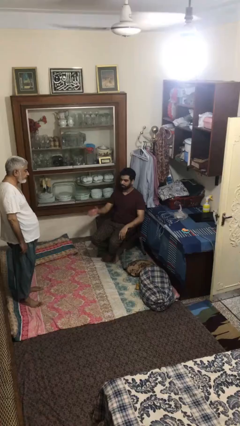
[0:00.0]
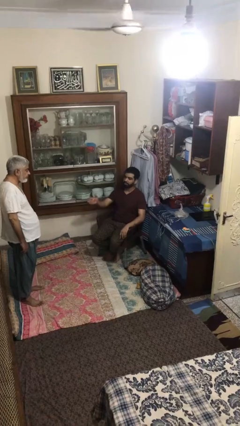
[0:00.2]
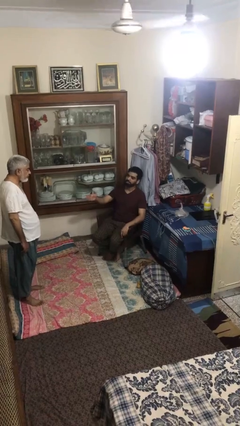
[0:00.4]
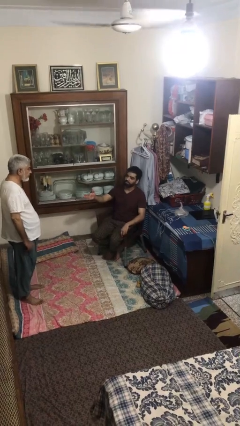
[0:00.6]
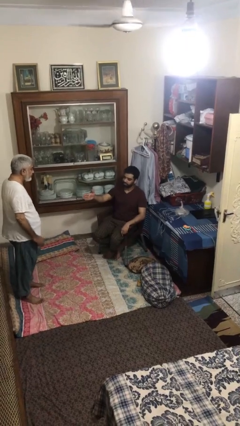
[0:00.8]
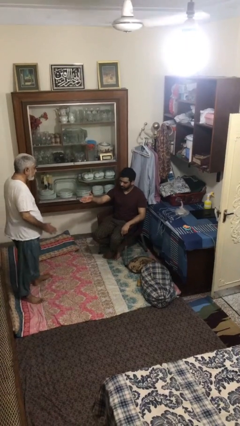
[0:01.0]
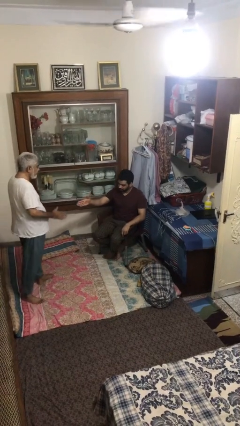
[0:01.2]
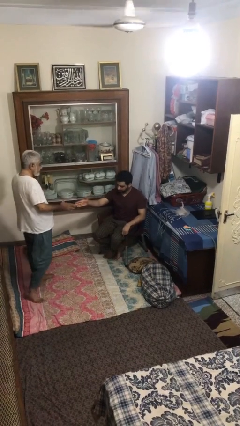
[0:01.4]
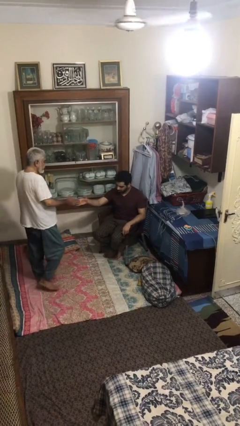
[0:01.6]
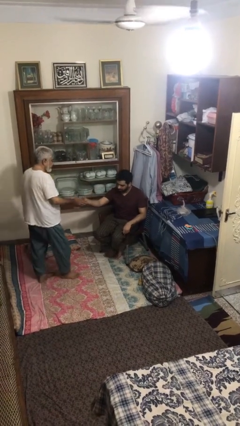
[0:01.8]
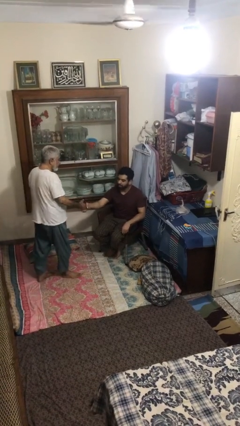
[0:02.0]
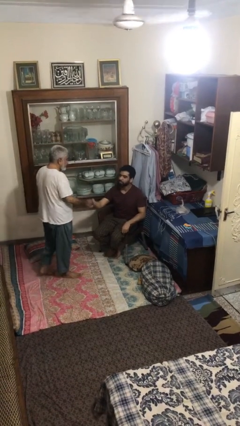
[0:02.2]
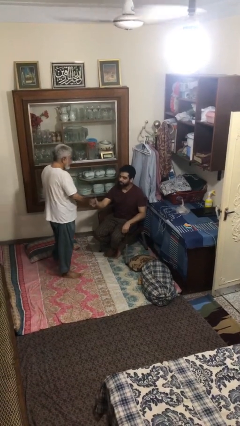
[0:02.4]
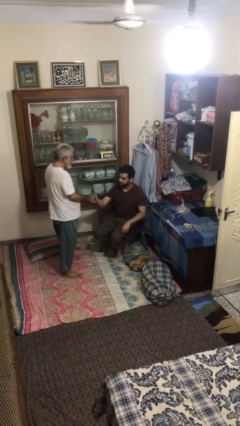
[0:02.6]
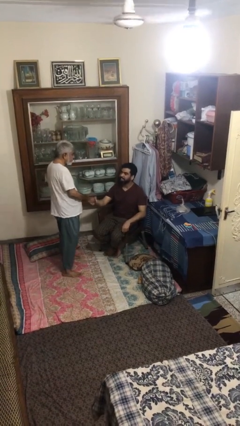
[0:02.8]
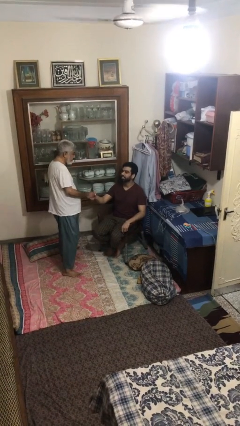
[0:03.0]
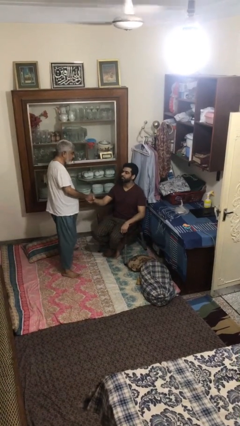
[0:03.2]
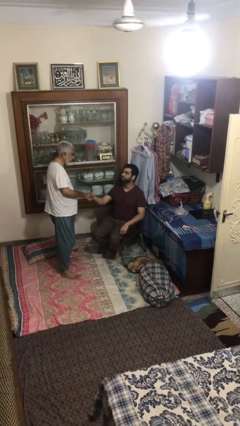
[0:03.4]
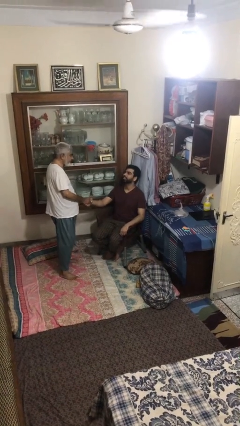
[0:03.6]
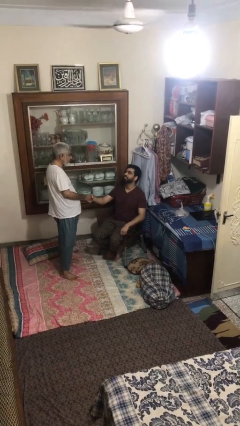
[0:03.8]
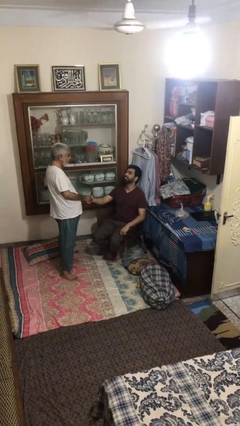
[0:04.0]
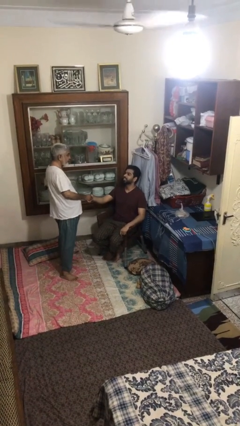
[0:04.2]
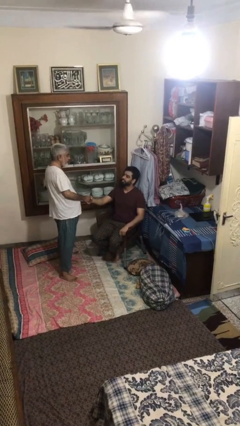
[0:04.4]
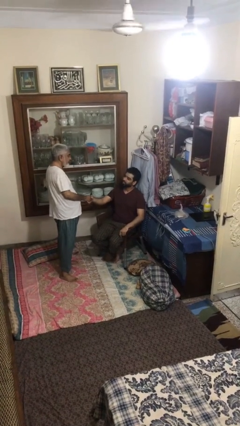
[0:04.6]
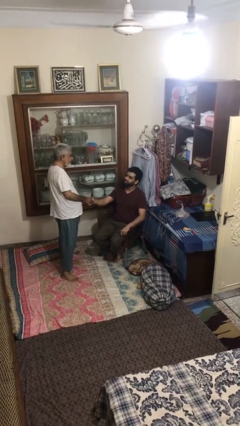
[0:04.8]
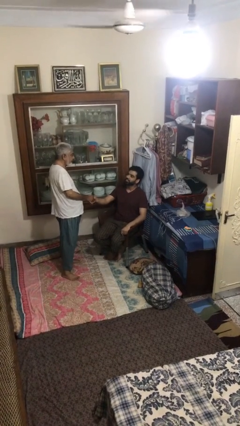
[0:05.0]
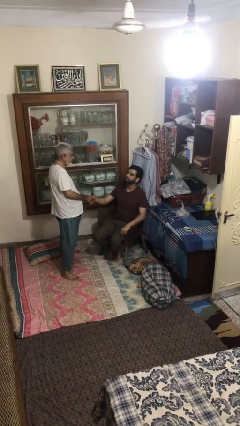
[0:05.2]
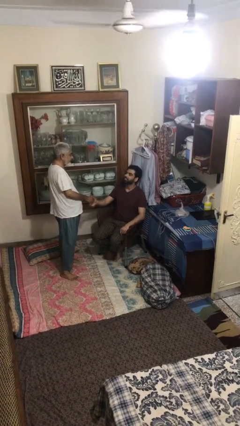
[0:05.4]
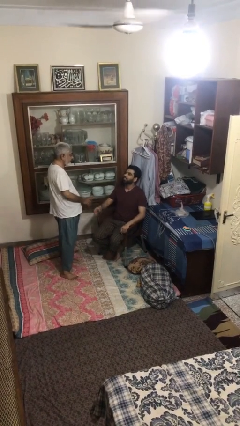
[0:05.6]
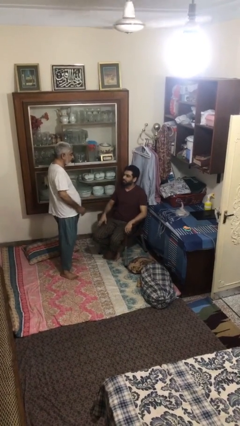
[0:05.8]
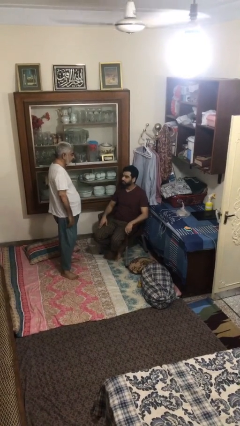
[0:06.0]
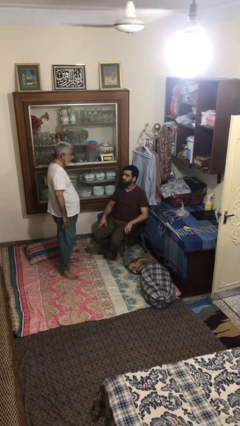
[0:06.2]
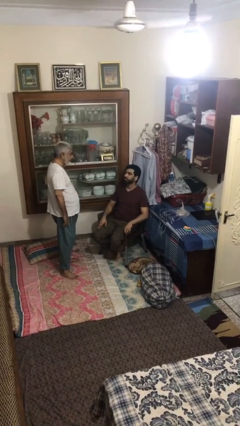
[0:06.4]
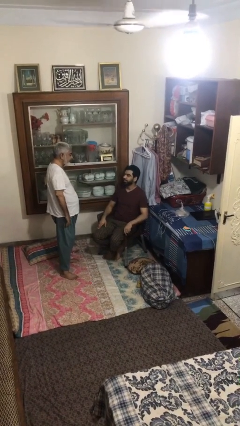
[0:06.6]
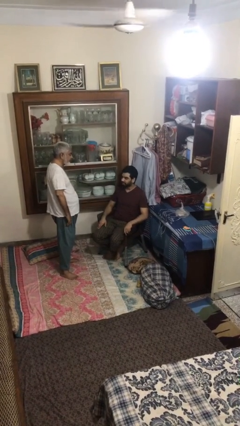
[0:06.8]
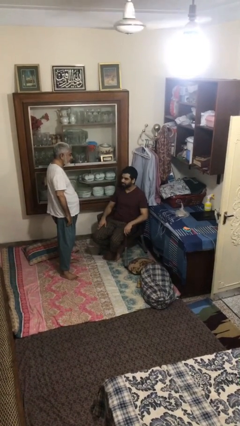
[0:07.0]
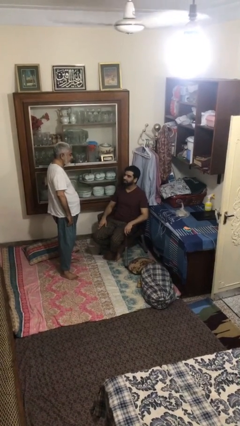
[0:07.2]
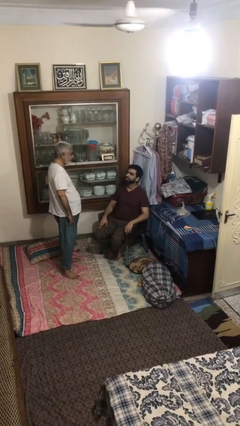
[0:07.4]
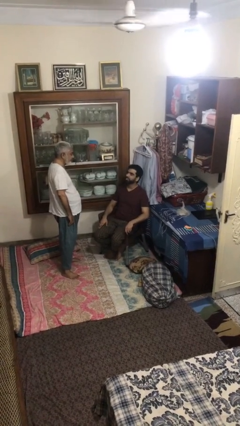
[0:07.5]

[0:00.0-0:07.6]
person shakes hand

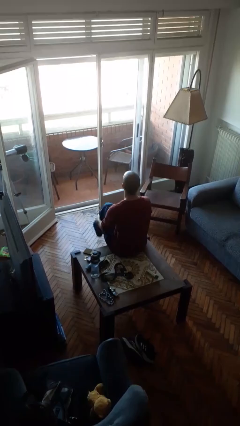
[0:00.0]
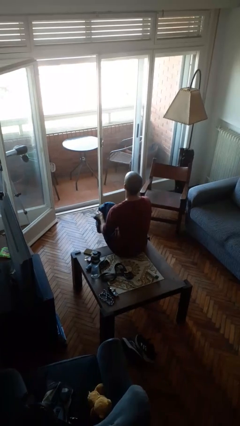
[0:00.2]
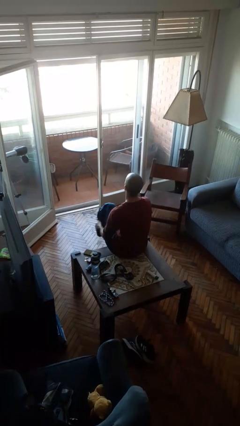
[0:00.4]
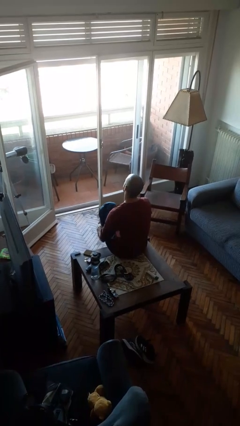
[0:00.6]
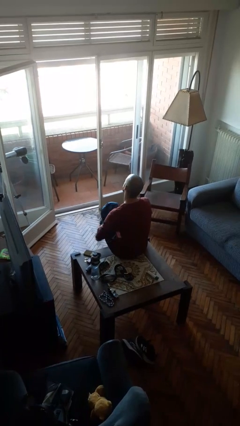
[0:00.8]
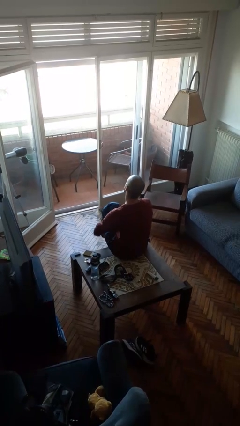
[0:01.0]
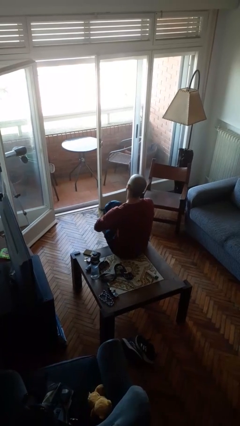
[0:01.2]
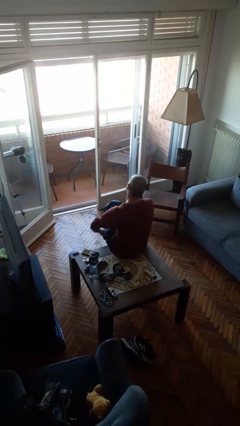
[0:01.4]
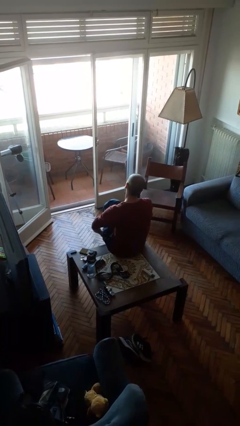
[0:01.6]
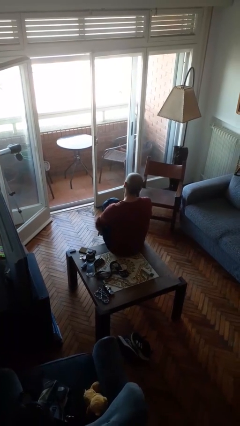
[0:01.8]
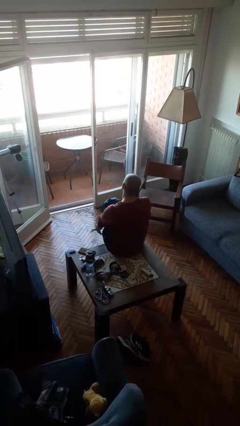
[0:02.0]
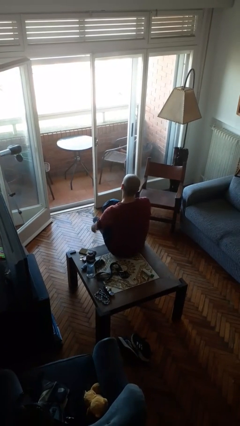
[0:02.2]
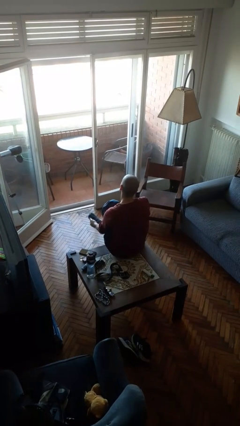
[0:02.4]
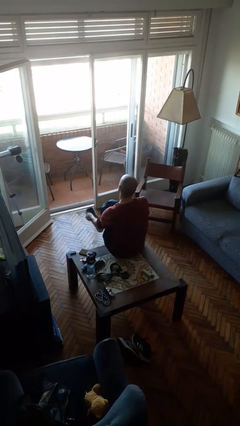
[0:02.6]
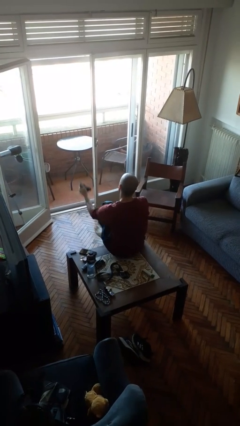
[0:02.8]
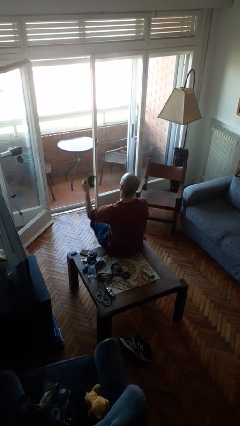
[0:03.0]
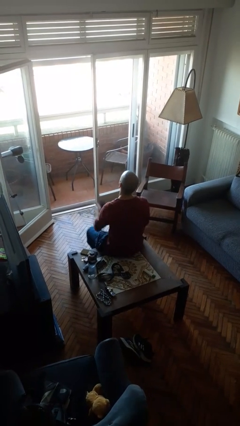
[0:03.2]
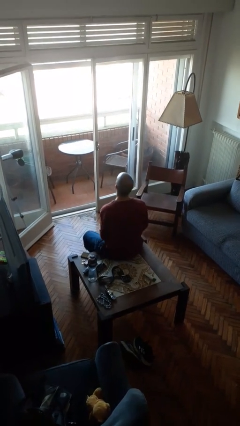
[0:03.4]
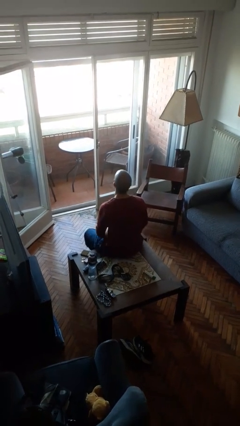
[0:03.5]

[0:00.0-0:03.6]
person takes off socks

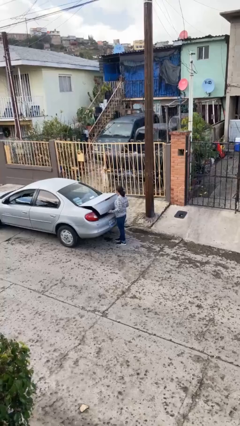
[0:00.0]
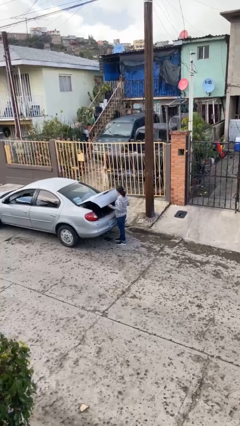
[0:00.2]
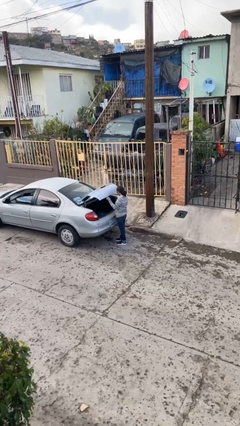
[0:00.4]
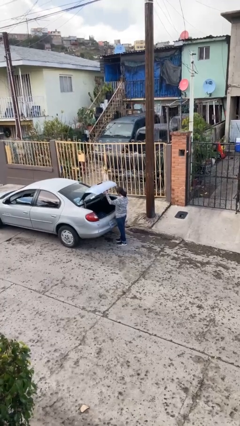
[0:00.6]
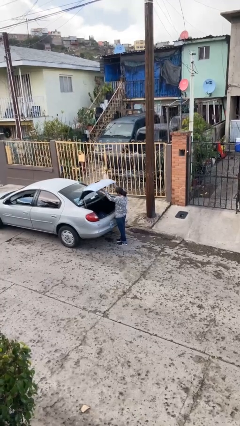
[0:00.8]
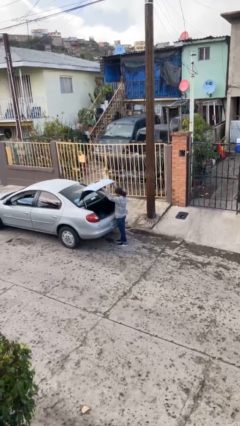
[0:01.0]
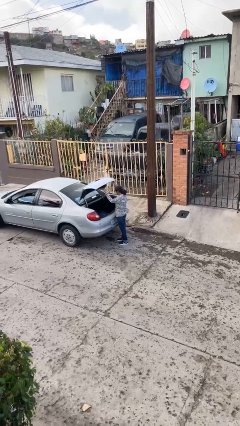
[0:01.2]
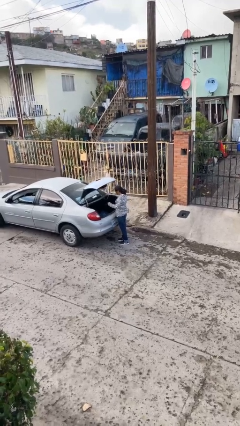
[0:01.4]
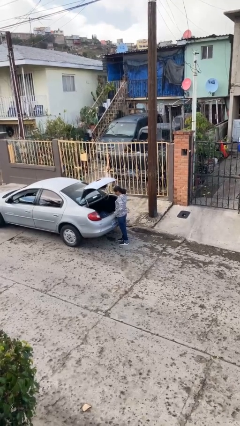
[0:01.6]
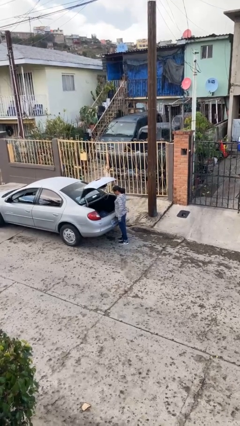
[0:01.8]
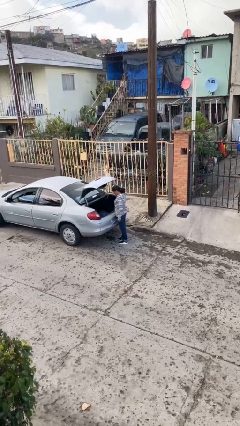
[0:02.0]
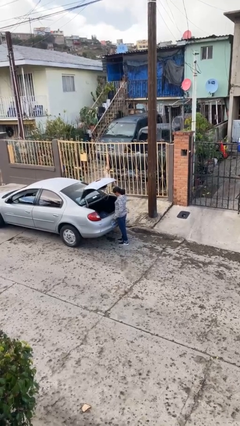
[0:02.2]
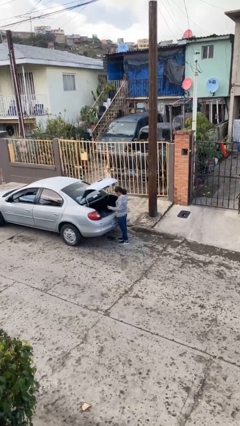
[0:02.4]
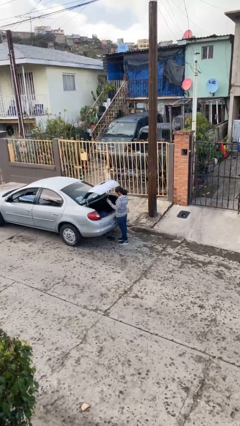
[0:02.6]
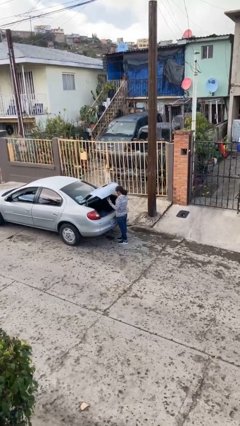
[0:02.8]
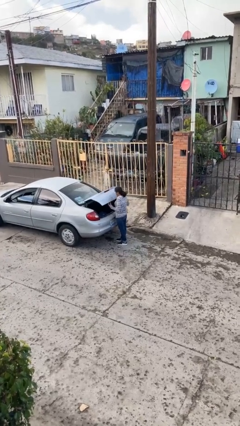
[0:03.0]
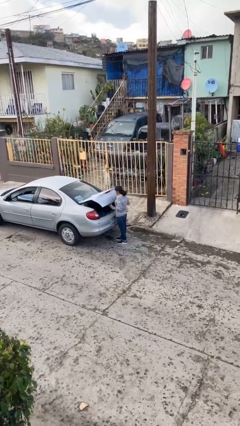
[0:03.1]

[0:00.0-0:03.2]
person opens car trunk

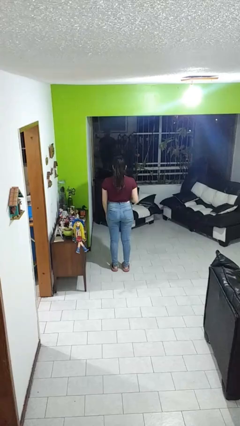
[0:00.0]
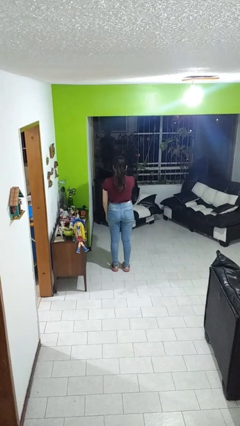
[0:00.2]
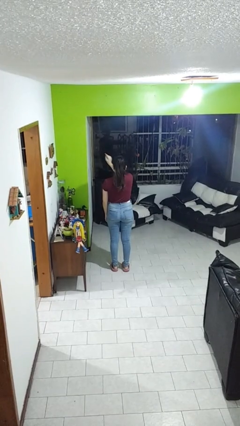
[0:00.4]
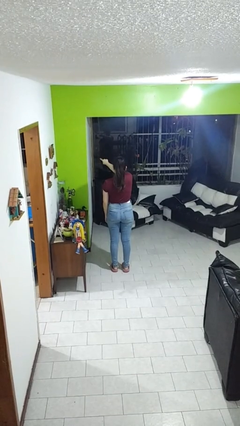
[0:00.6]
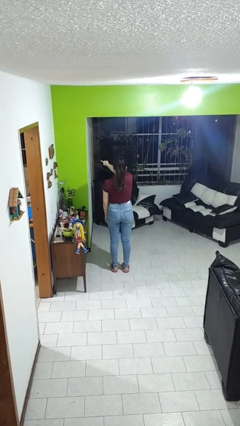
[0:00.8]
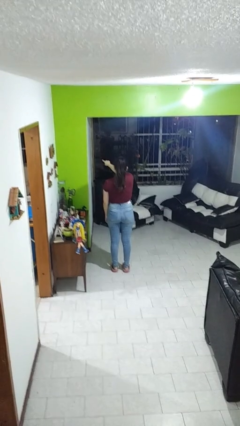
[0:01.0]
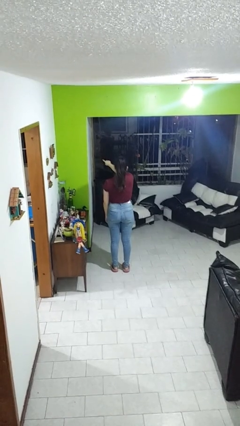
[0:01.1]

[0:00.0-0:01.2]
person points at person

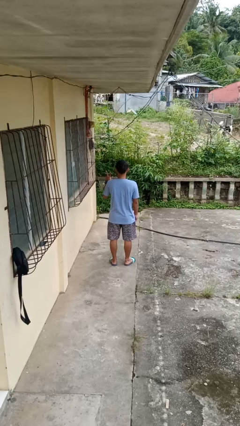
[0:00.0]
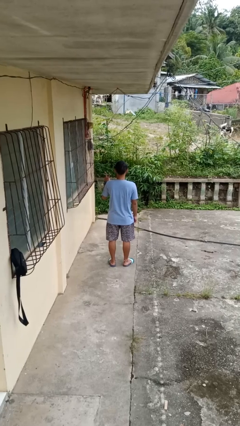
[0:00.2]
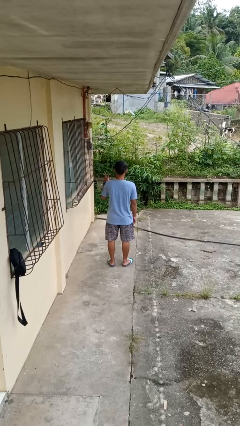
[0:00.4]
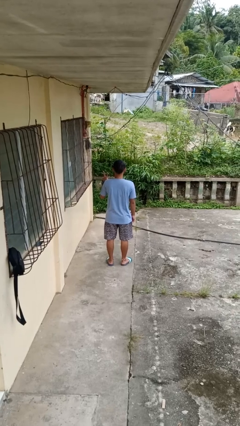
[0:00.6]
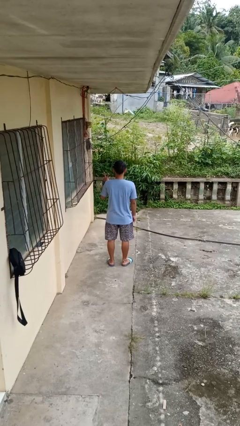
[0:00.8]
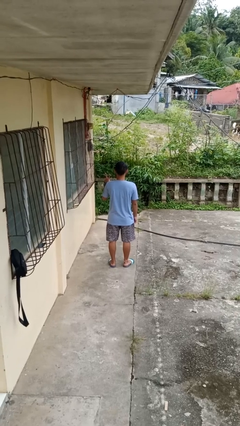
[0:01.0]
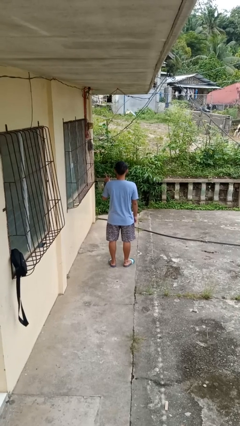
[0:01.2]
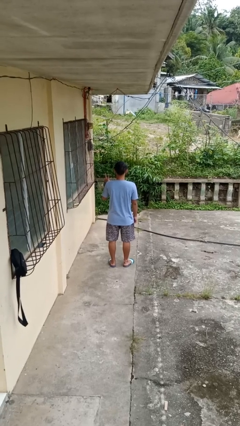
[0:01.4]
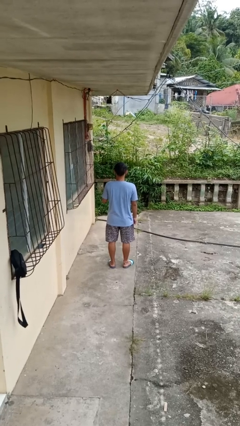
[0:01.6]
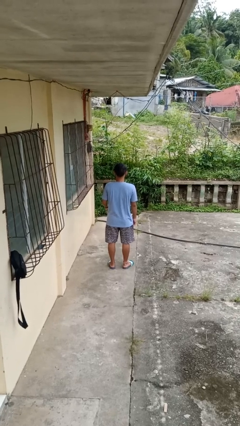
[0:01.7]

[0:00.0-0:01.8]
person gestures peace

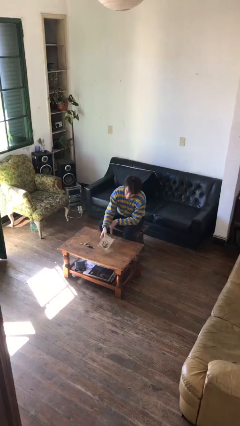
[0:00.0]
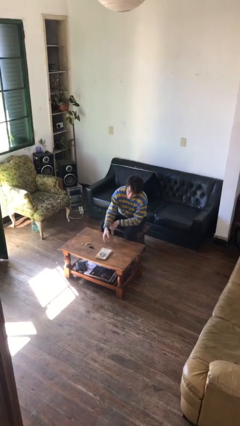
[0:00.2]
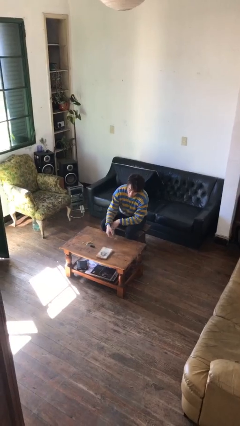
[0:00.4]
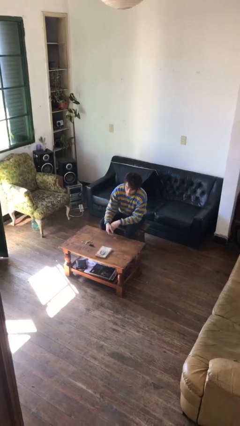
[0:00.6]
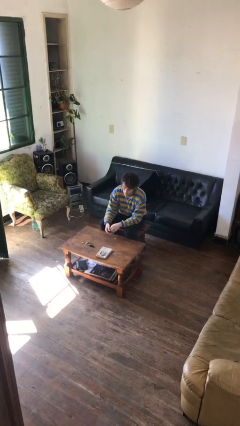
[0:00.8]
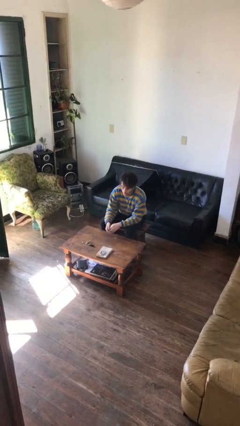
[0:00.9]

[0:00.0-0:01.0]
person puts down object on table
